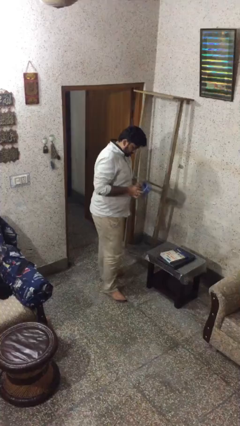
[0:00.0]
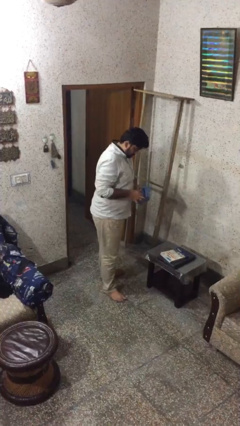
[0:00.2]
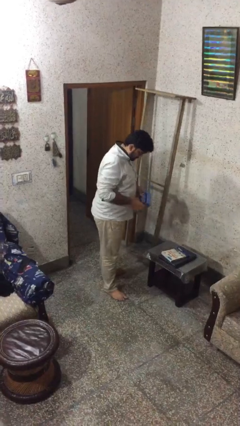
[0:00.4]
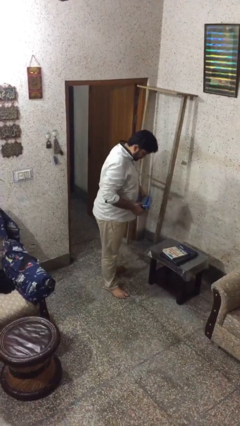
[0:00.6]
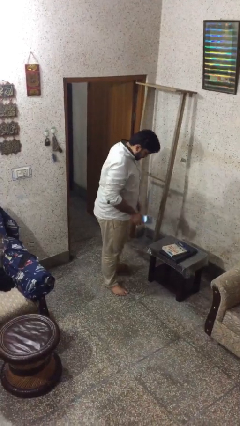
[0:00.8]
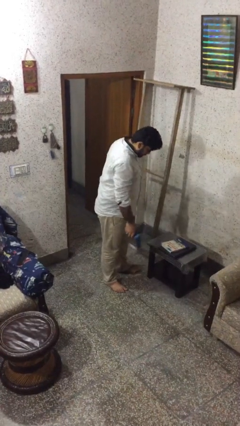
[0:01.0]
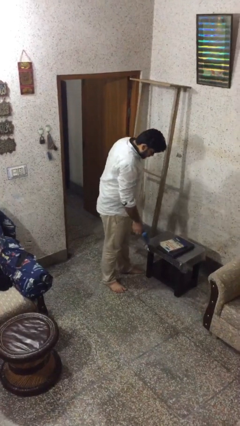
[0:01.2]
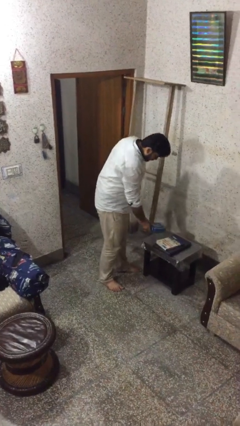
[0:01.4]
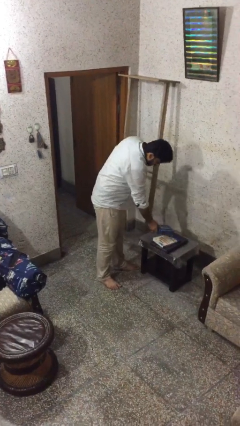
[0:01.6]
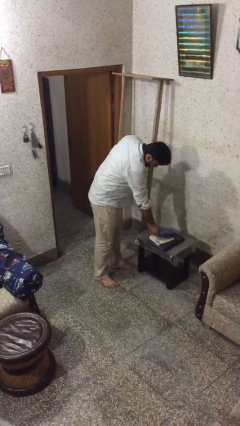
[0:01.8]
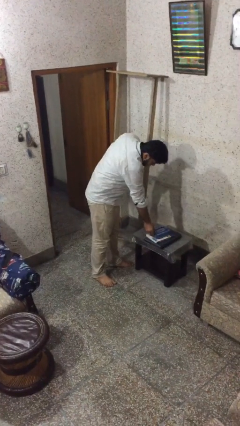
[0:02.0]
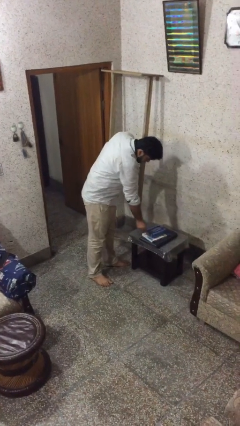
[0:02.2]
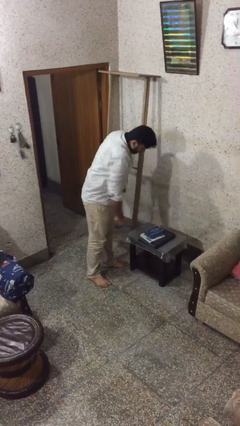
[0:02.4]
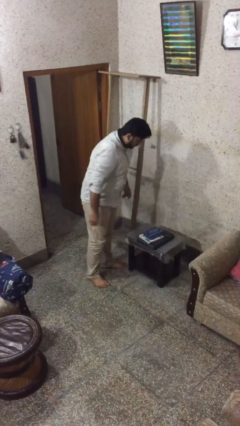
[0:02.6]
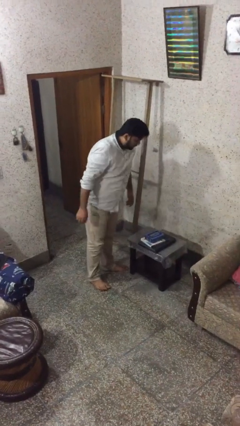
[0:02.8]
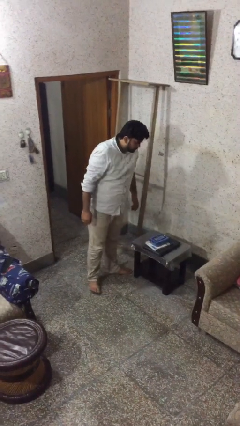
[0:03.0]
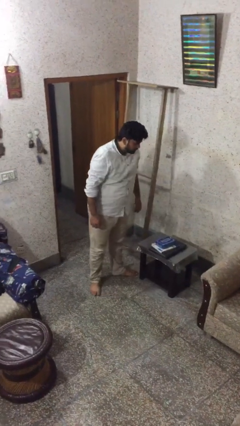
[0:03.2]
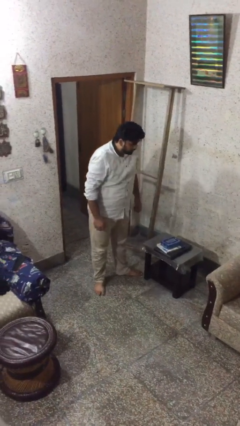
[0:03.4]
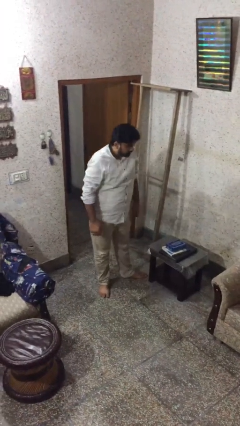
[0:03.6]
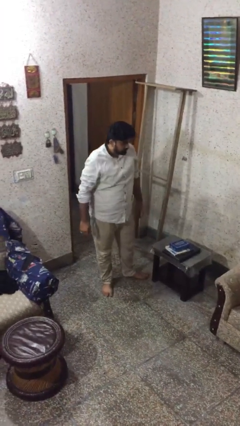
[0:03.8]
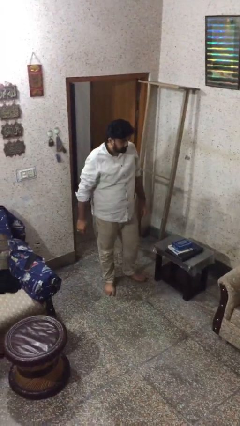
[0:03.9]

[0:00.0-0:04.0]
person puts down object on table

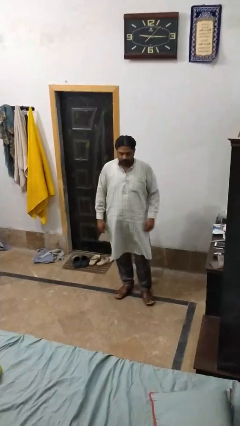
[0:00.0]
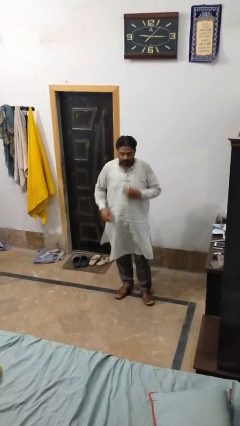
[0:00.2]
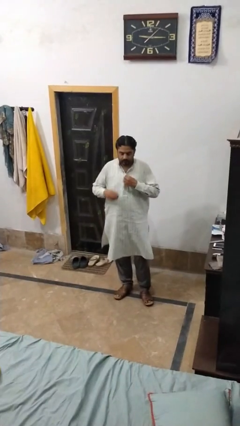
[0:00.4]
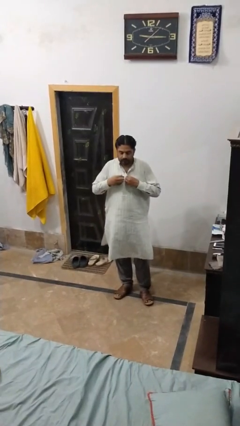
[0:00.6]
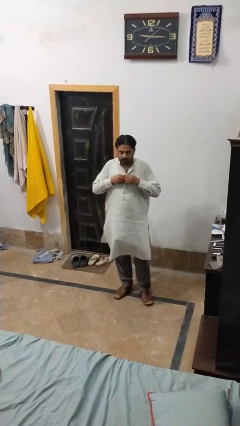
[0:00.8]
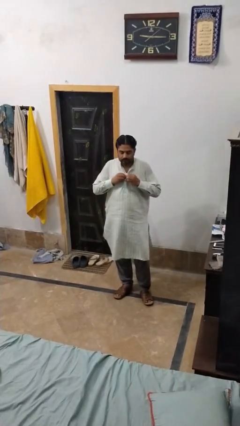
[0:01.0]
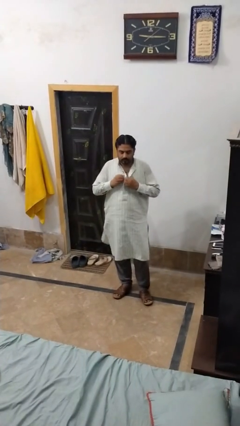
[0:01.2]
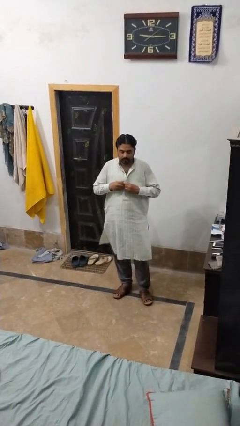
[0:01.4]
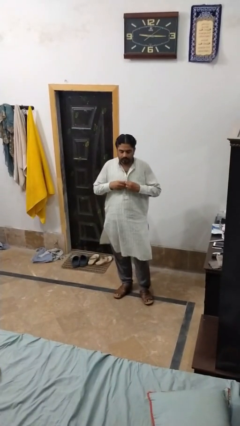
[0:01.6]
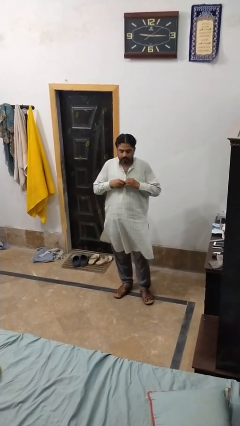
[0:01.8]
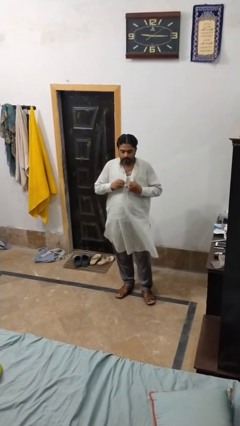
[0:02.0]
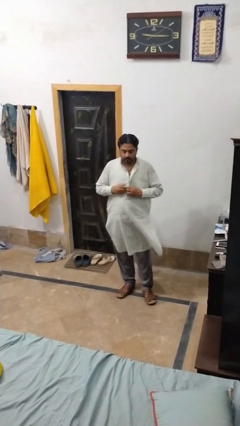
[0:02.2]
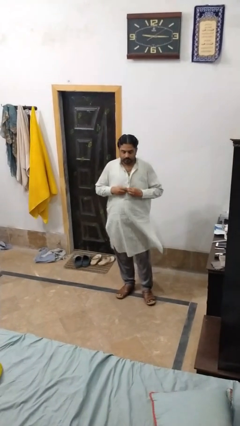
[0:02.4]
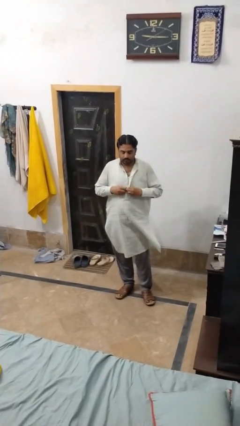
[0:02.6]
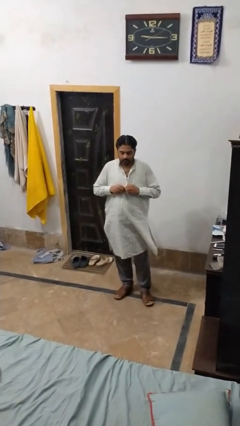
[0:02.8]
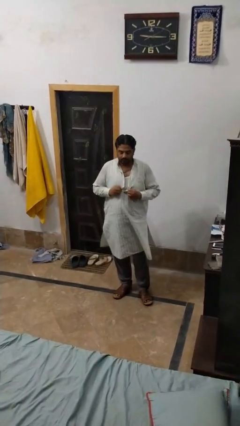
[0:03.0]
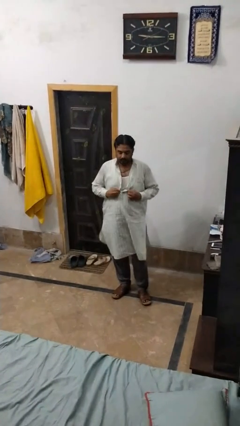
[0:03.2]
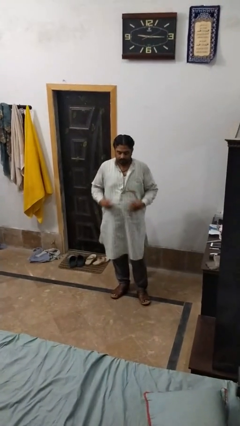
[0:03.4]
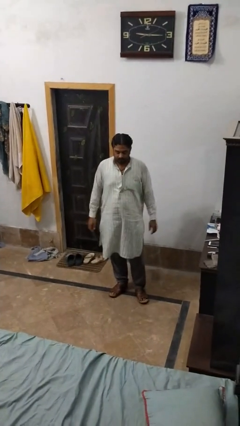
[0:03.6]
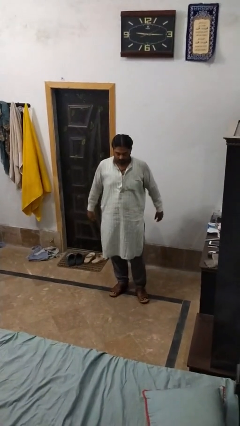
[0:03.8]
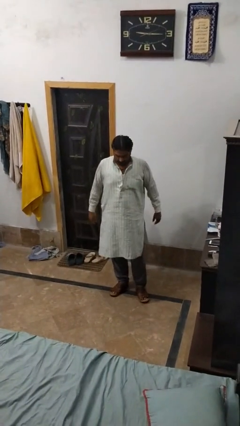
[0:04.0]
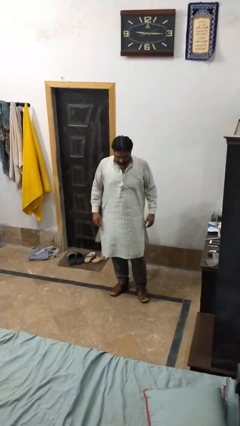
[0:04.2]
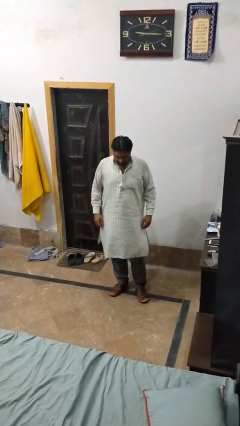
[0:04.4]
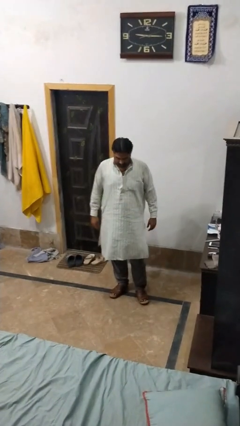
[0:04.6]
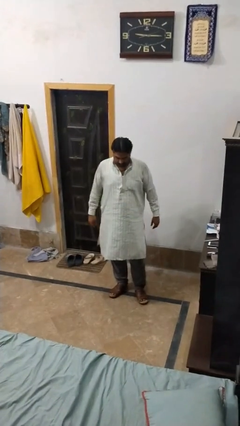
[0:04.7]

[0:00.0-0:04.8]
person unbuttons shirt

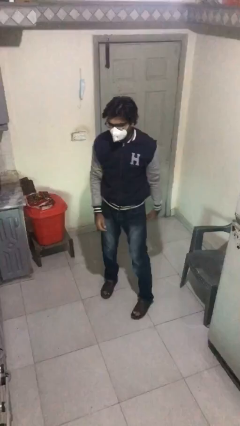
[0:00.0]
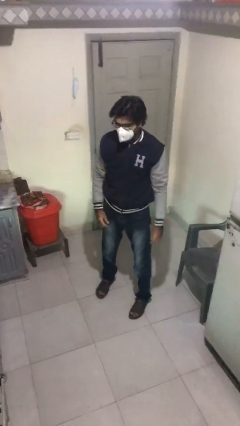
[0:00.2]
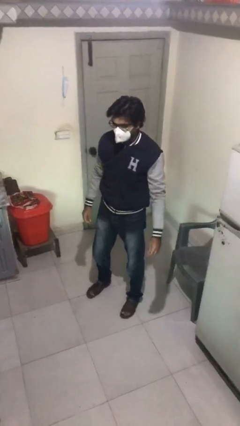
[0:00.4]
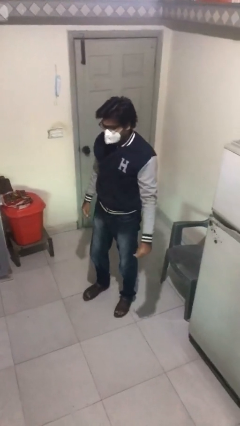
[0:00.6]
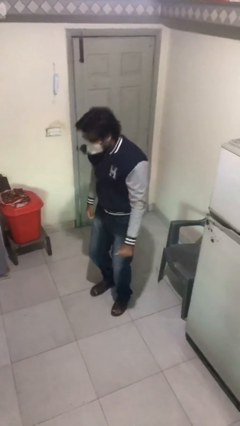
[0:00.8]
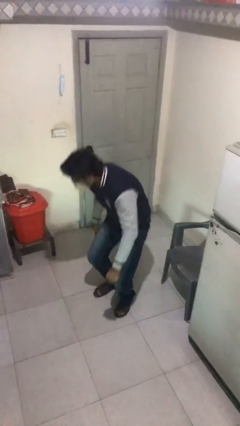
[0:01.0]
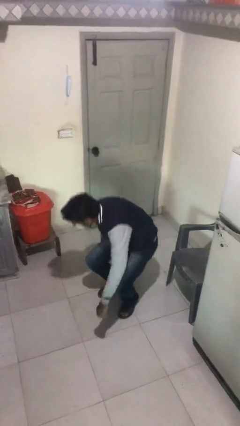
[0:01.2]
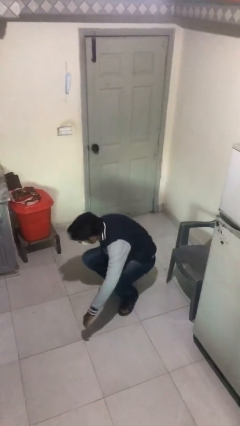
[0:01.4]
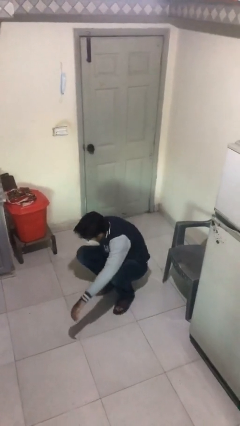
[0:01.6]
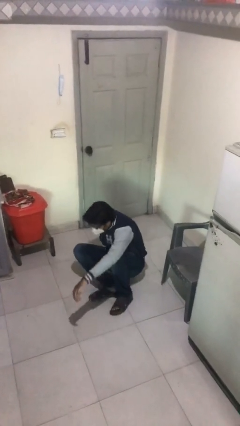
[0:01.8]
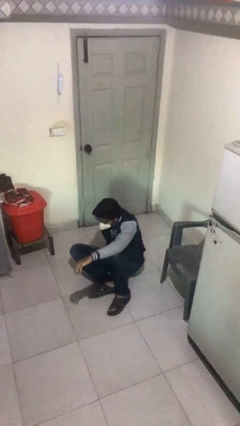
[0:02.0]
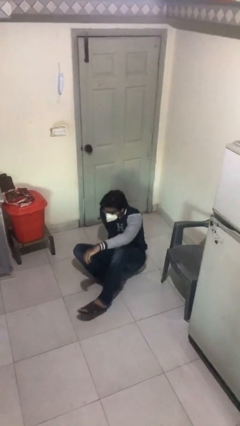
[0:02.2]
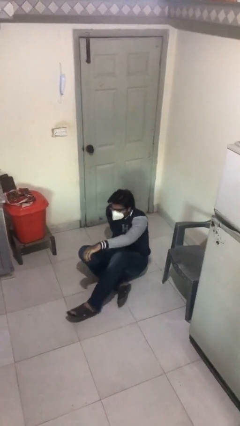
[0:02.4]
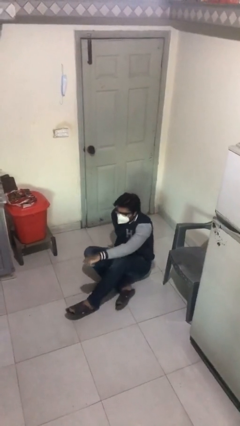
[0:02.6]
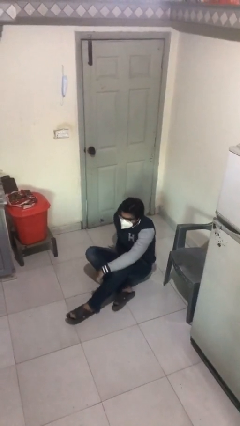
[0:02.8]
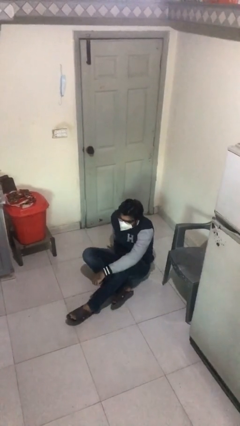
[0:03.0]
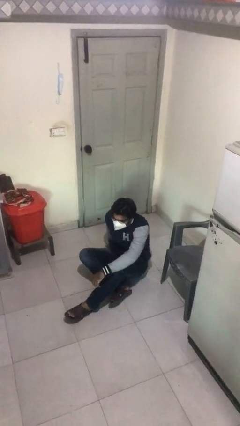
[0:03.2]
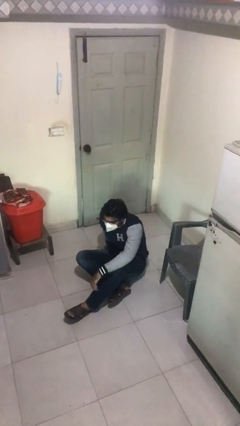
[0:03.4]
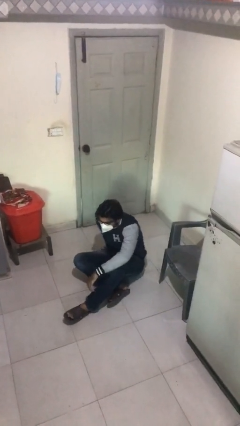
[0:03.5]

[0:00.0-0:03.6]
person sits down

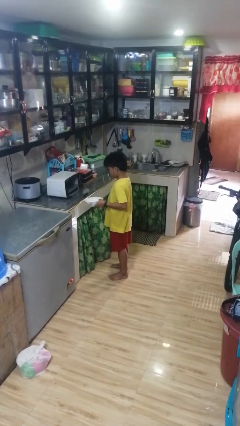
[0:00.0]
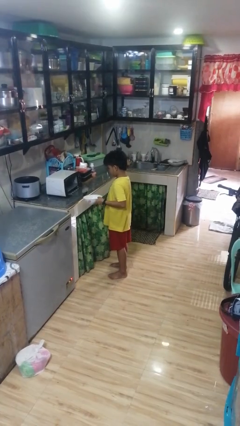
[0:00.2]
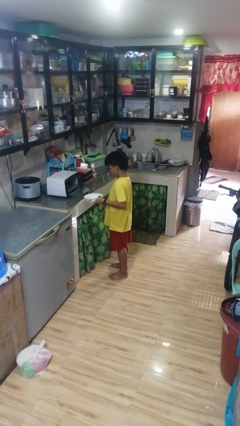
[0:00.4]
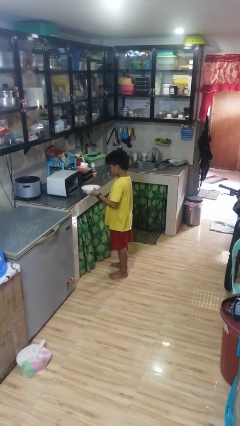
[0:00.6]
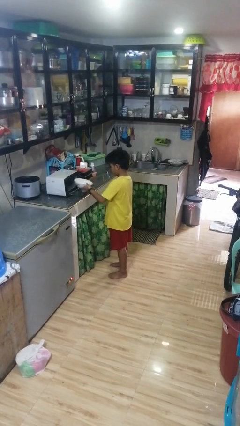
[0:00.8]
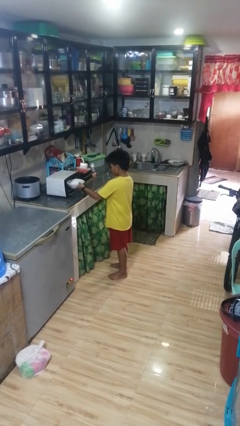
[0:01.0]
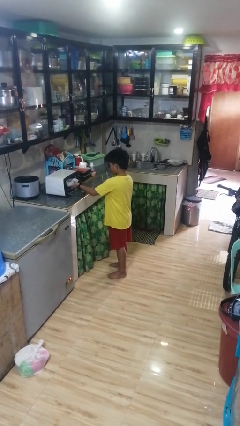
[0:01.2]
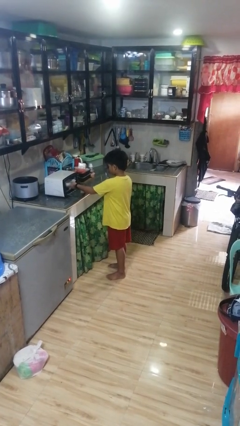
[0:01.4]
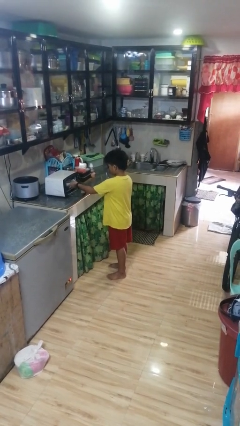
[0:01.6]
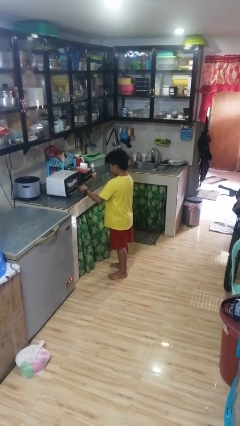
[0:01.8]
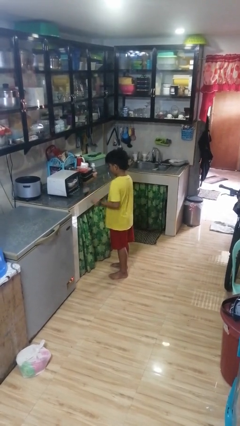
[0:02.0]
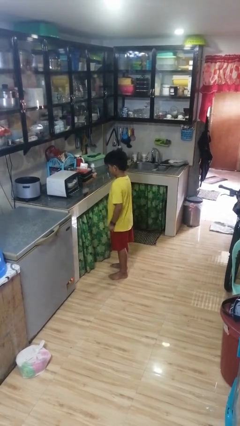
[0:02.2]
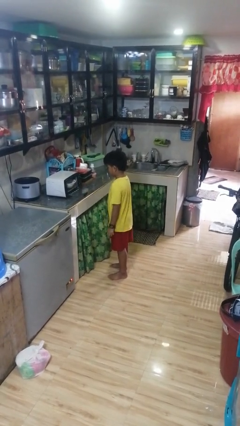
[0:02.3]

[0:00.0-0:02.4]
person puts object into microwave

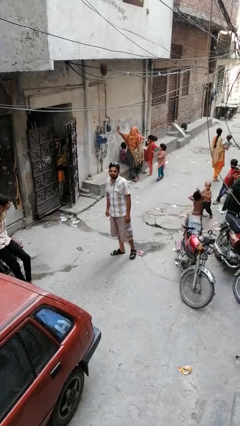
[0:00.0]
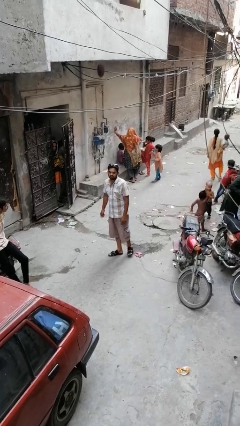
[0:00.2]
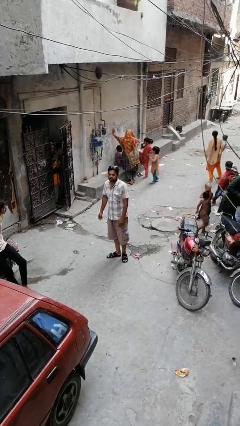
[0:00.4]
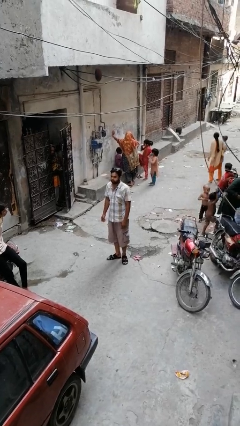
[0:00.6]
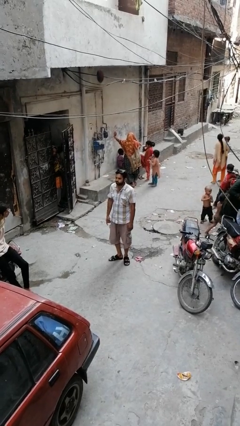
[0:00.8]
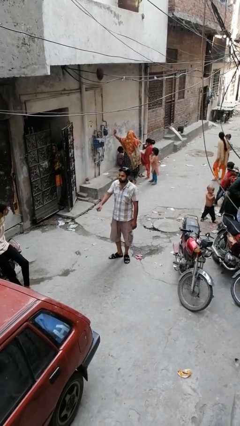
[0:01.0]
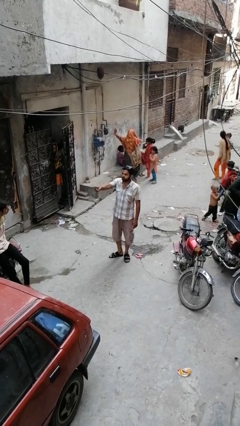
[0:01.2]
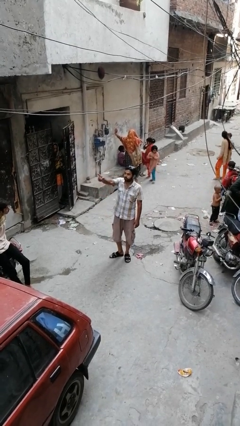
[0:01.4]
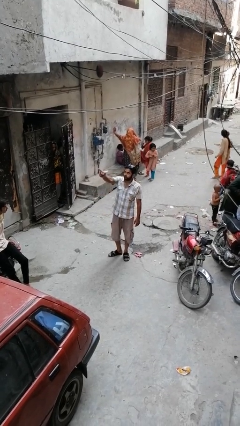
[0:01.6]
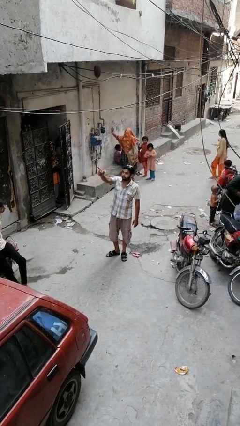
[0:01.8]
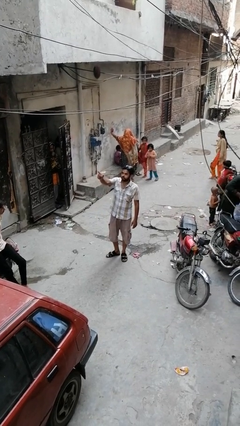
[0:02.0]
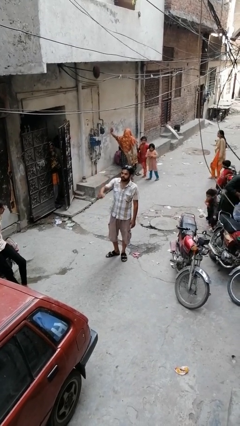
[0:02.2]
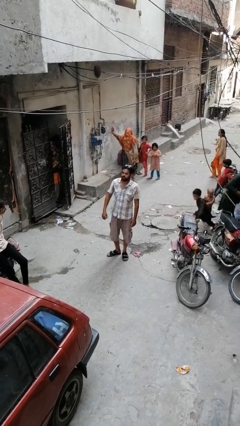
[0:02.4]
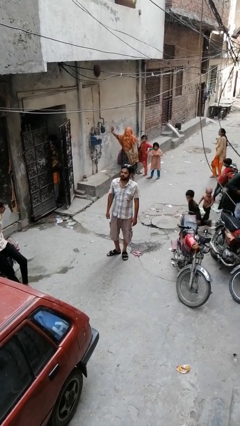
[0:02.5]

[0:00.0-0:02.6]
person points at person
